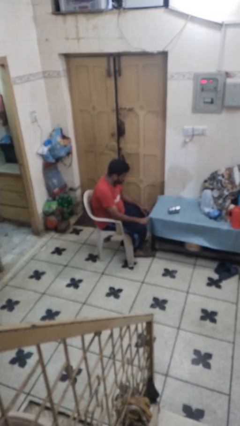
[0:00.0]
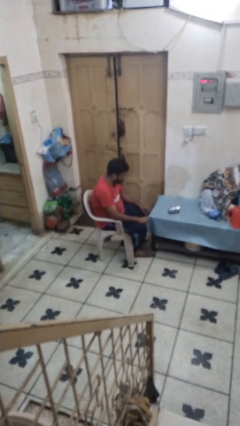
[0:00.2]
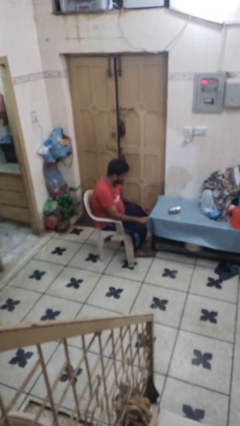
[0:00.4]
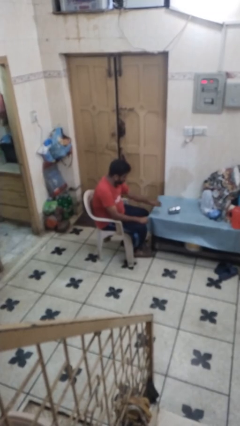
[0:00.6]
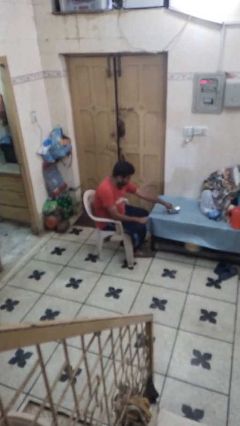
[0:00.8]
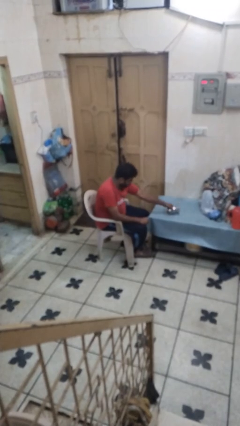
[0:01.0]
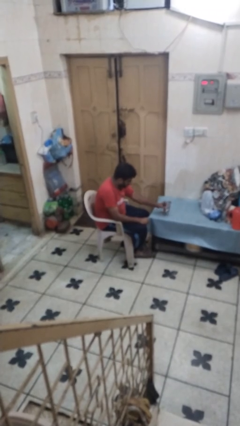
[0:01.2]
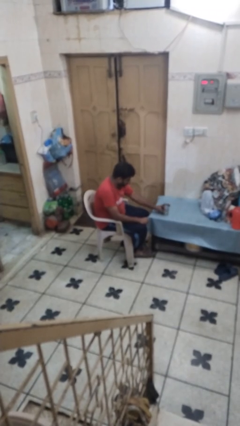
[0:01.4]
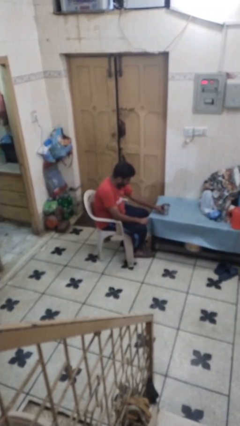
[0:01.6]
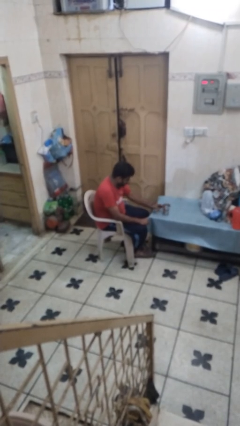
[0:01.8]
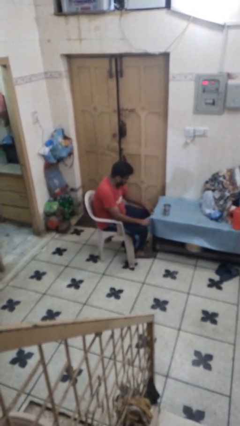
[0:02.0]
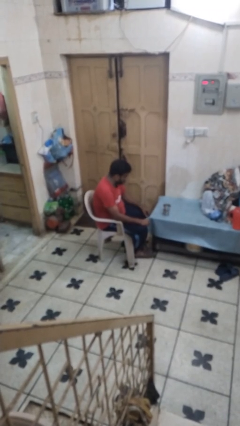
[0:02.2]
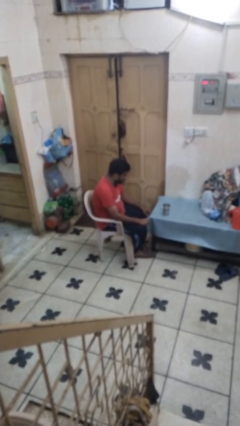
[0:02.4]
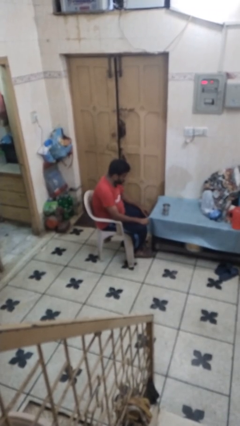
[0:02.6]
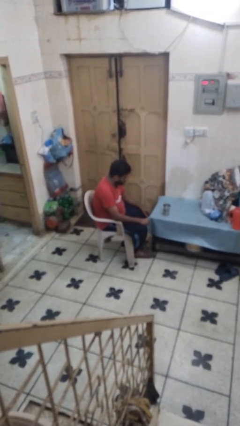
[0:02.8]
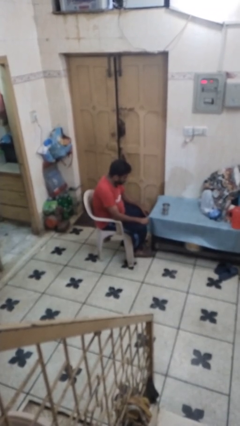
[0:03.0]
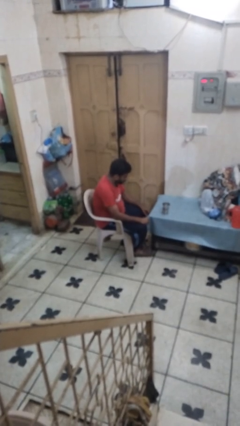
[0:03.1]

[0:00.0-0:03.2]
person sets upright glass

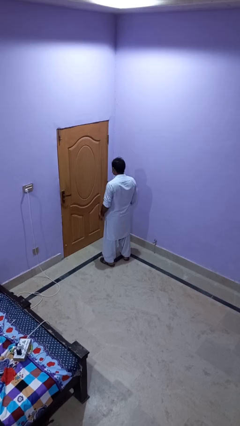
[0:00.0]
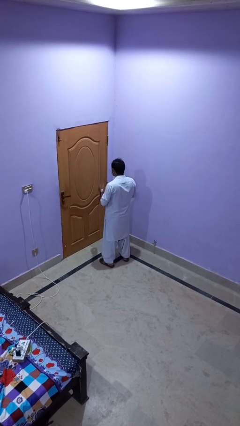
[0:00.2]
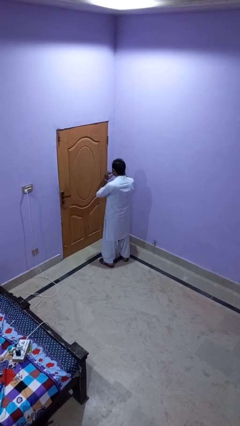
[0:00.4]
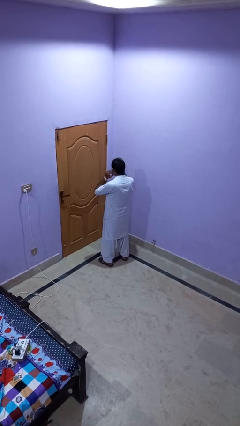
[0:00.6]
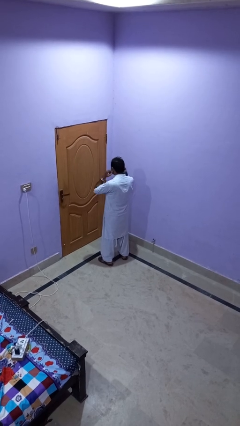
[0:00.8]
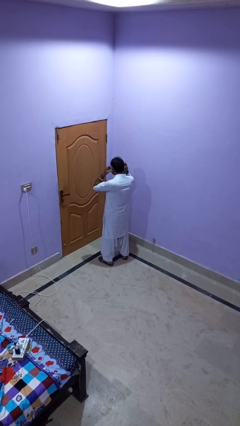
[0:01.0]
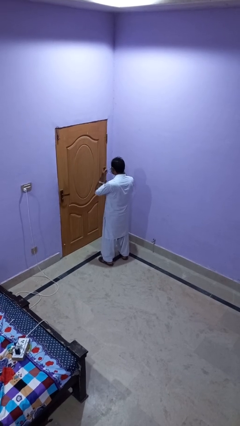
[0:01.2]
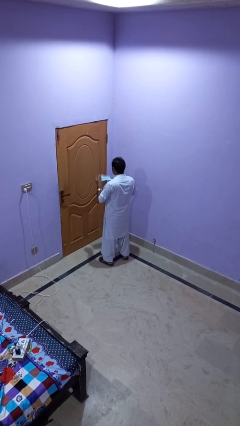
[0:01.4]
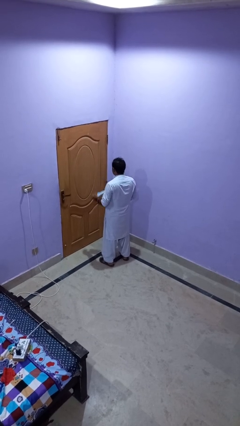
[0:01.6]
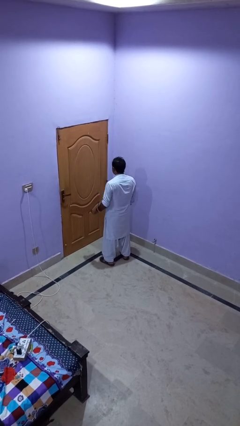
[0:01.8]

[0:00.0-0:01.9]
person takes off facemask

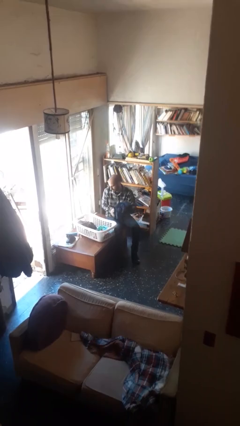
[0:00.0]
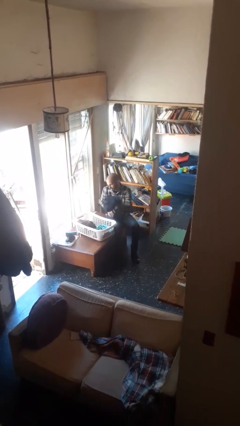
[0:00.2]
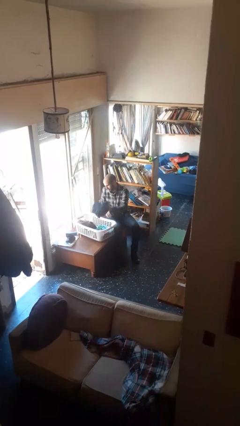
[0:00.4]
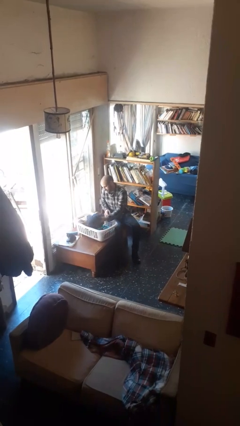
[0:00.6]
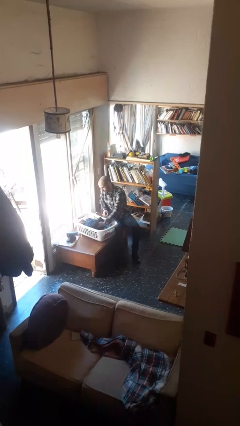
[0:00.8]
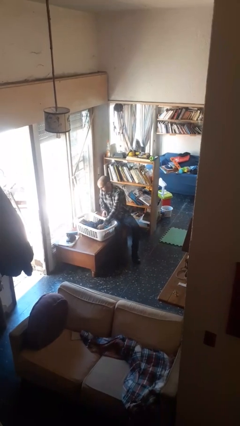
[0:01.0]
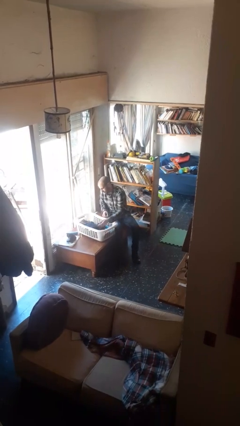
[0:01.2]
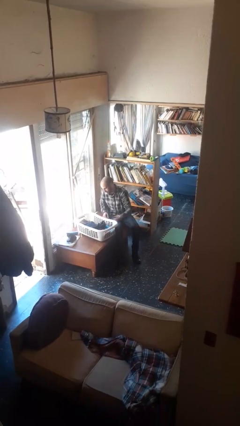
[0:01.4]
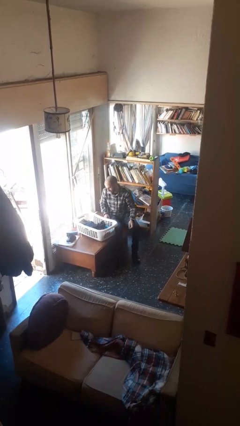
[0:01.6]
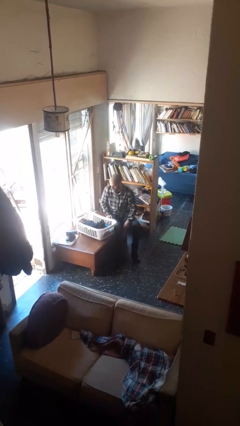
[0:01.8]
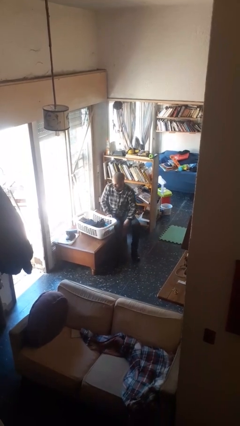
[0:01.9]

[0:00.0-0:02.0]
person puts object into basket

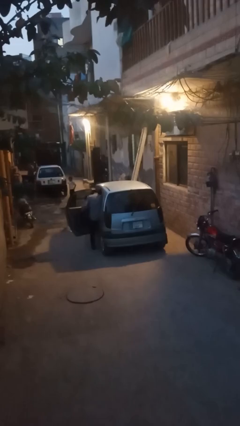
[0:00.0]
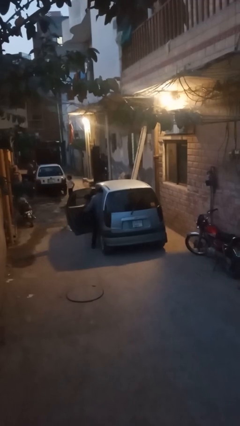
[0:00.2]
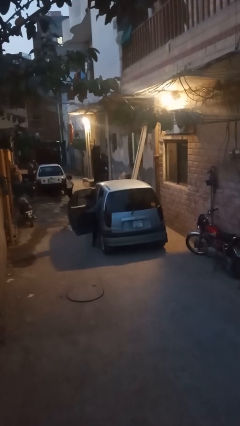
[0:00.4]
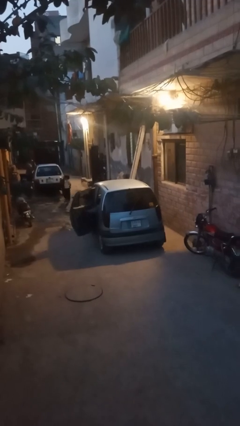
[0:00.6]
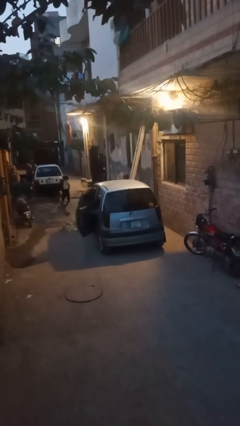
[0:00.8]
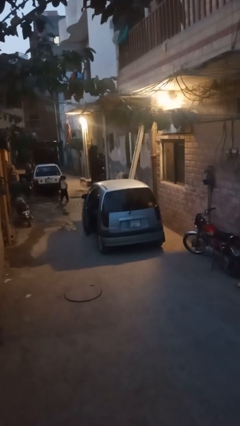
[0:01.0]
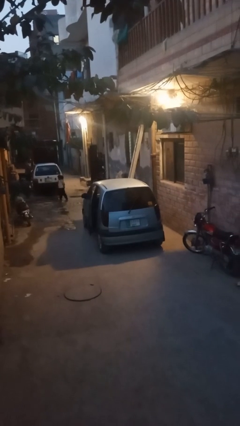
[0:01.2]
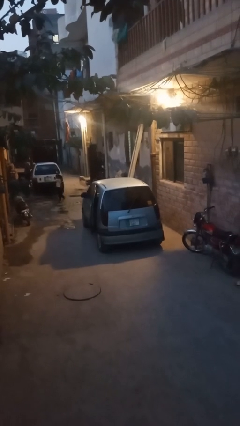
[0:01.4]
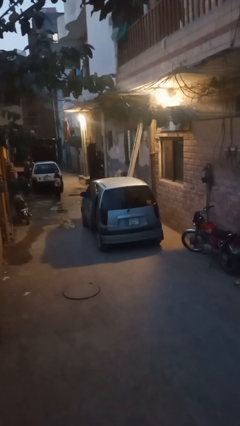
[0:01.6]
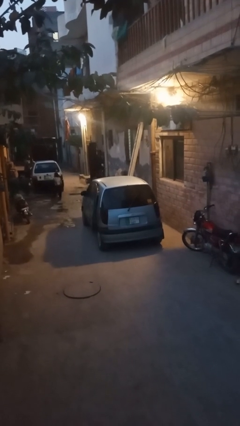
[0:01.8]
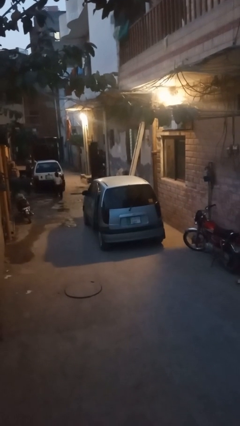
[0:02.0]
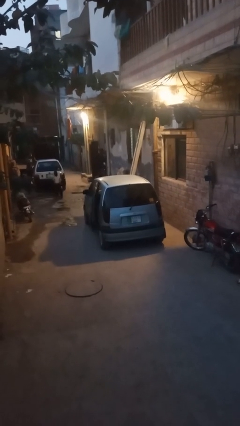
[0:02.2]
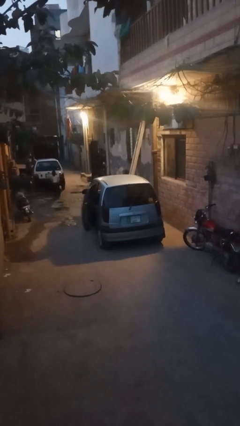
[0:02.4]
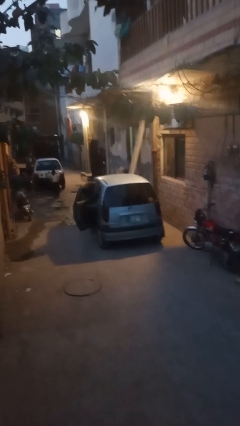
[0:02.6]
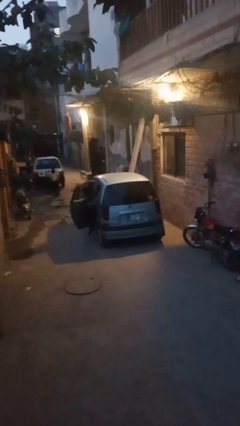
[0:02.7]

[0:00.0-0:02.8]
car picks up person

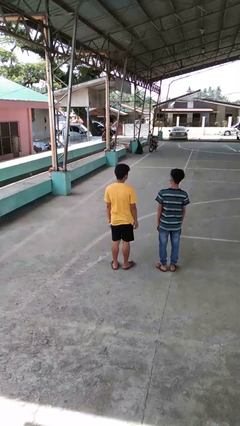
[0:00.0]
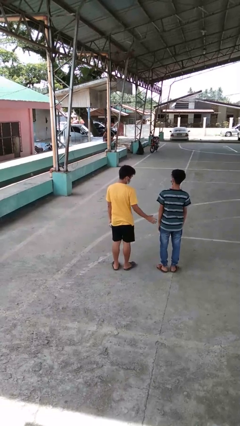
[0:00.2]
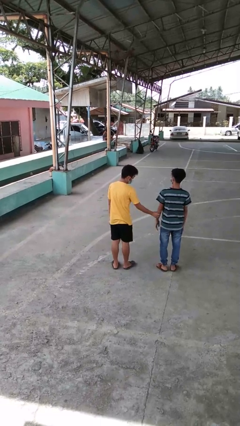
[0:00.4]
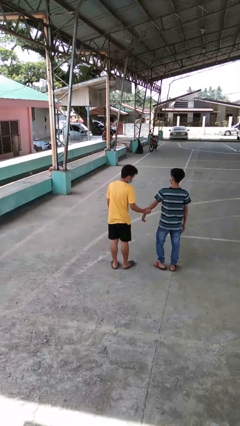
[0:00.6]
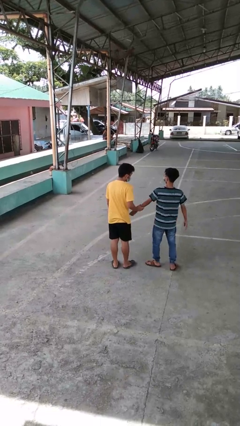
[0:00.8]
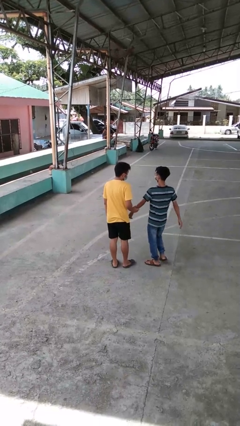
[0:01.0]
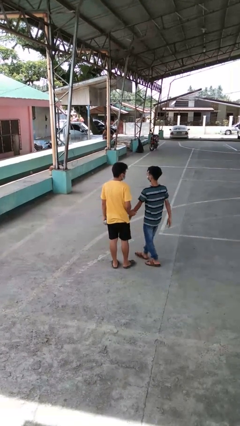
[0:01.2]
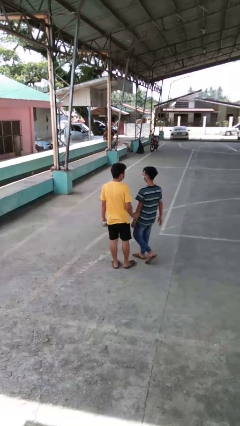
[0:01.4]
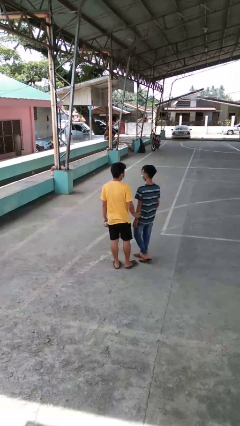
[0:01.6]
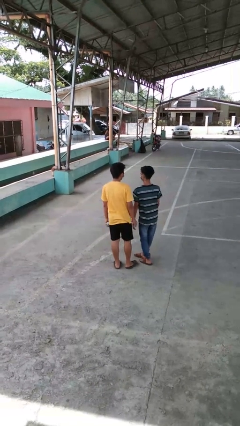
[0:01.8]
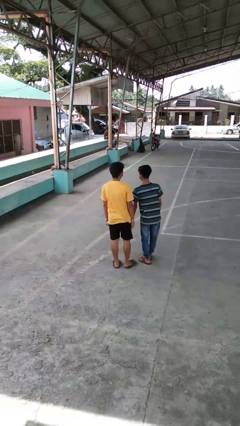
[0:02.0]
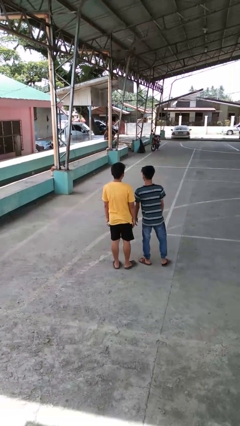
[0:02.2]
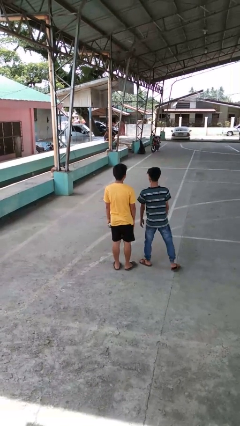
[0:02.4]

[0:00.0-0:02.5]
person grabs person by forearm

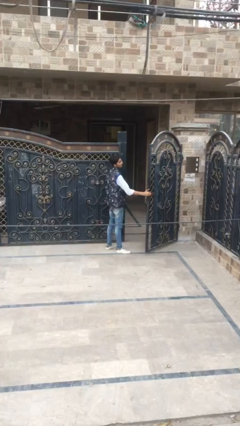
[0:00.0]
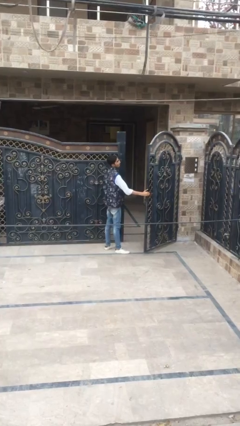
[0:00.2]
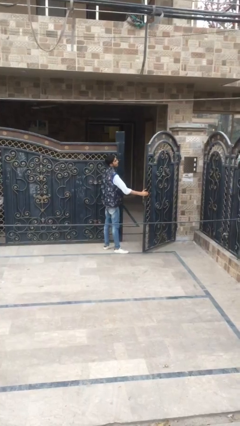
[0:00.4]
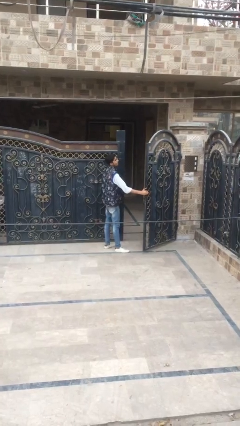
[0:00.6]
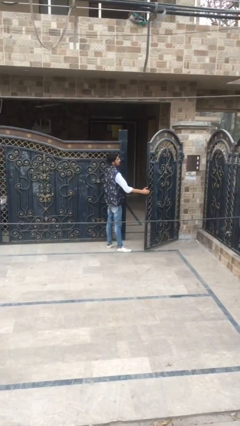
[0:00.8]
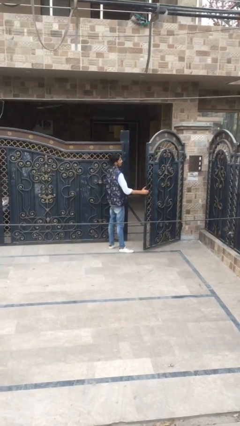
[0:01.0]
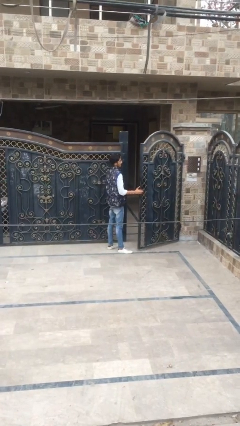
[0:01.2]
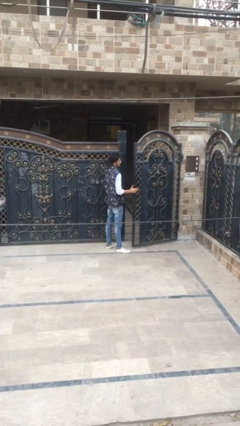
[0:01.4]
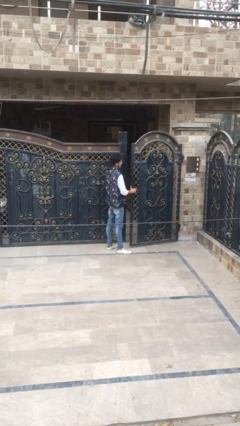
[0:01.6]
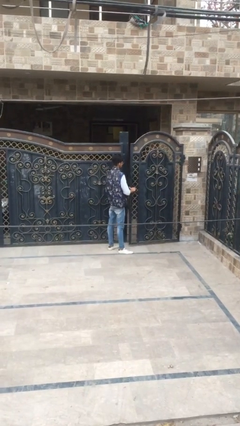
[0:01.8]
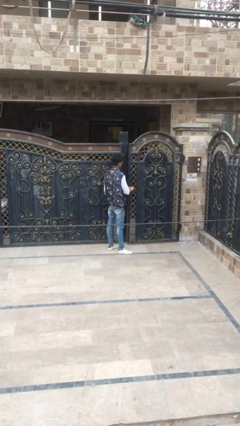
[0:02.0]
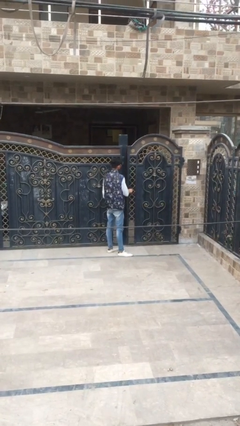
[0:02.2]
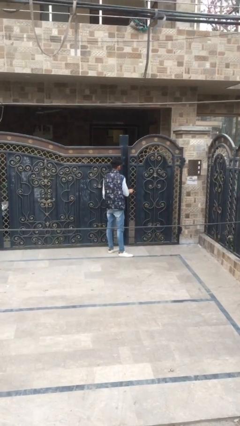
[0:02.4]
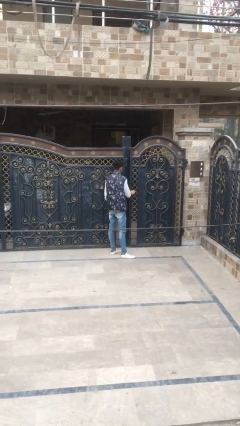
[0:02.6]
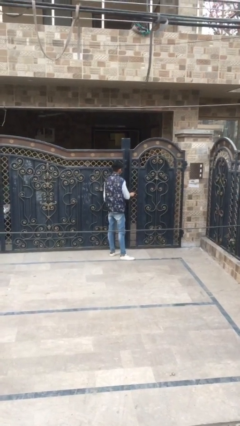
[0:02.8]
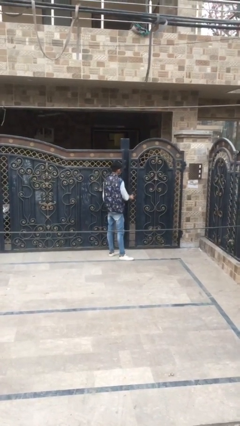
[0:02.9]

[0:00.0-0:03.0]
person closes facility door

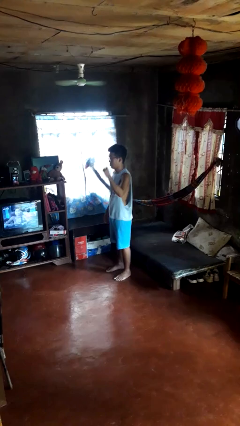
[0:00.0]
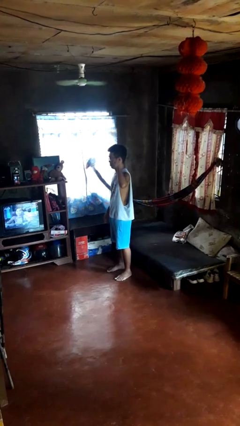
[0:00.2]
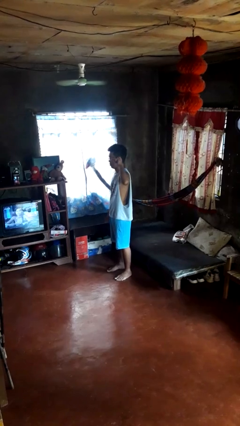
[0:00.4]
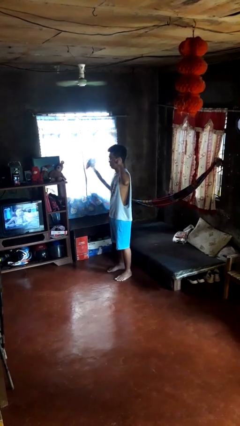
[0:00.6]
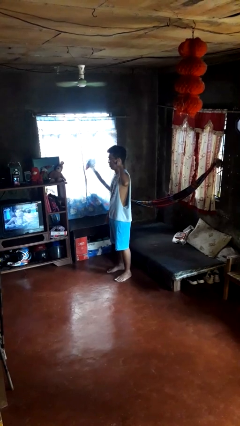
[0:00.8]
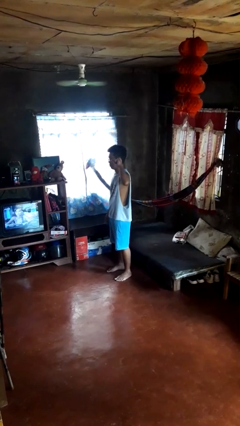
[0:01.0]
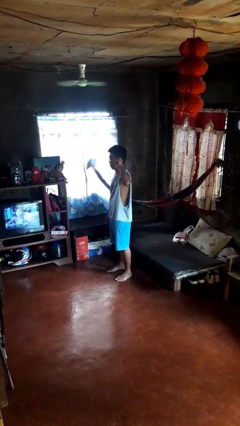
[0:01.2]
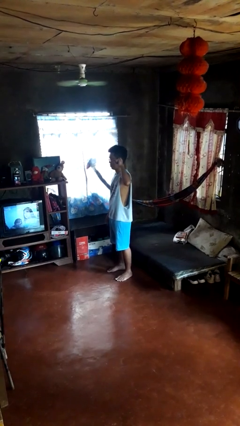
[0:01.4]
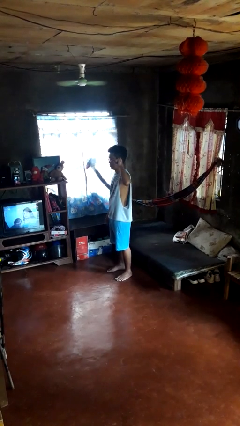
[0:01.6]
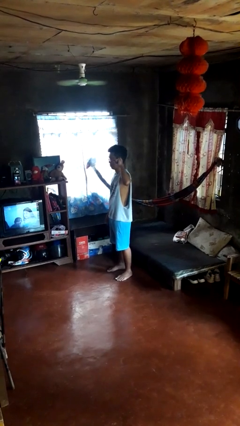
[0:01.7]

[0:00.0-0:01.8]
person gestures listen closely

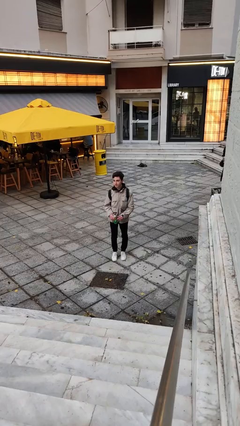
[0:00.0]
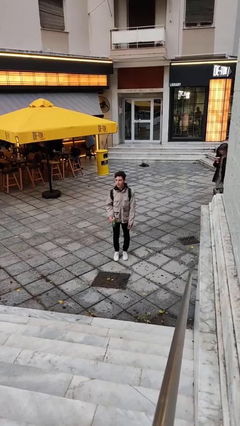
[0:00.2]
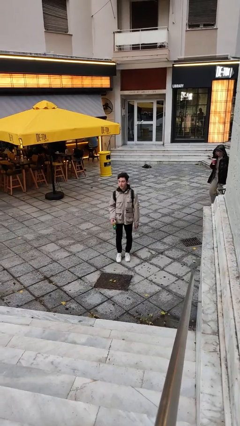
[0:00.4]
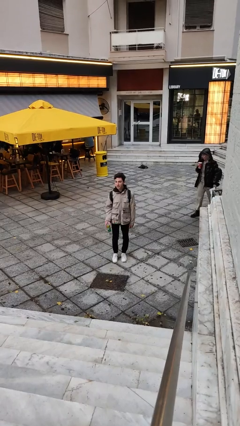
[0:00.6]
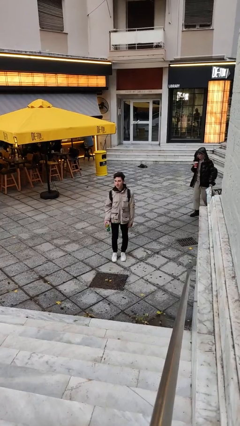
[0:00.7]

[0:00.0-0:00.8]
person opens beverage can
